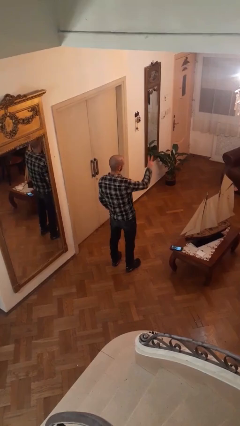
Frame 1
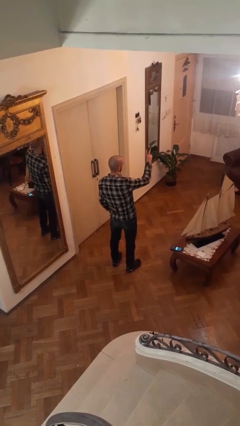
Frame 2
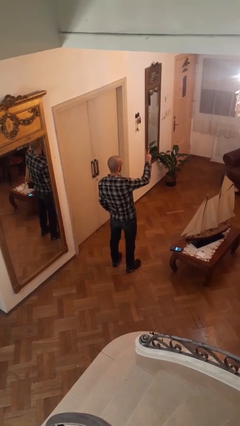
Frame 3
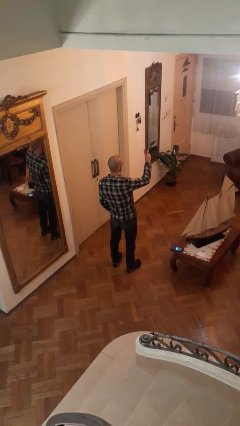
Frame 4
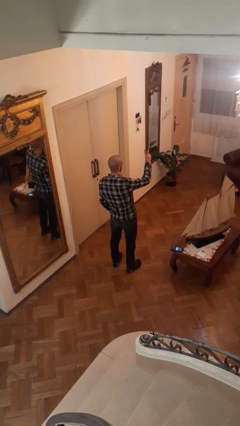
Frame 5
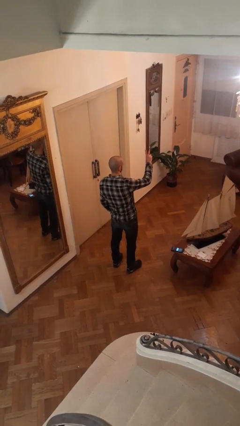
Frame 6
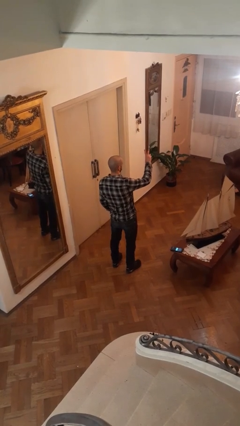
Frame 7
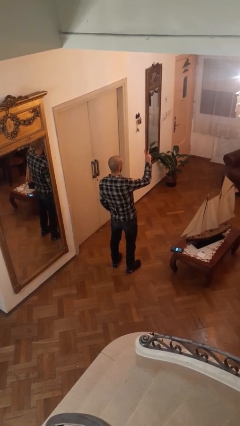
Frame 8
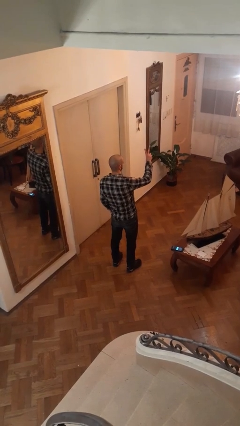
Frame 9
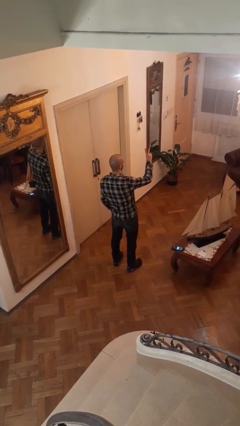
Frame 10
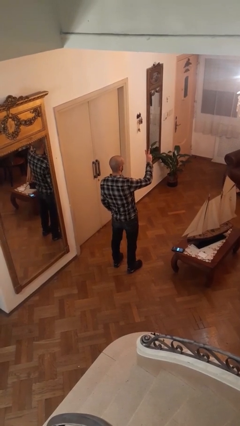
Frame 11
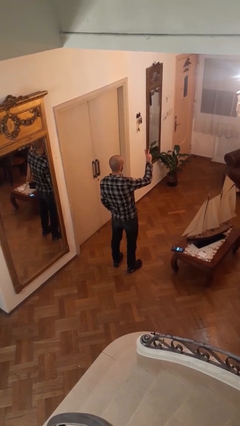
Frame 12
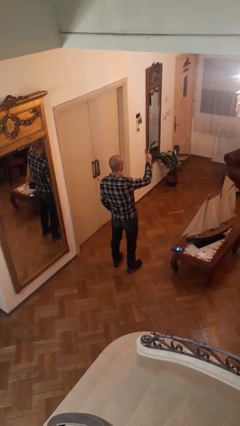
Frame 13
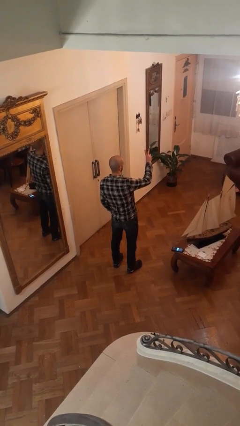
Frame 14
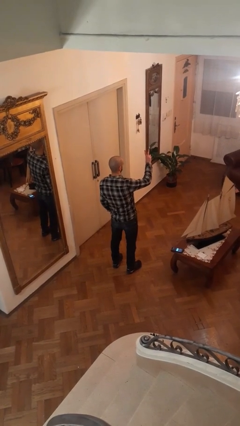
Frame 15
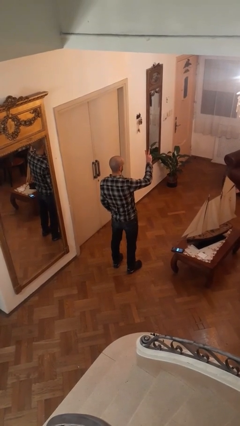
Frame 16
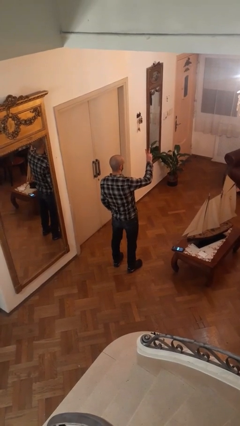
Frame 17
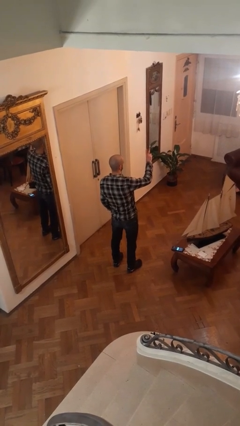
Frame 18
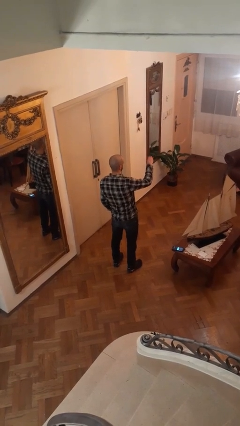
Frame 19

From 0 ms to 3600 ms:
person gestures peace

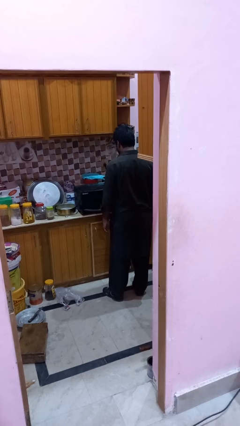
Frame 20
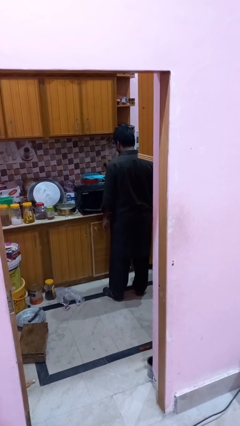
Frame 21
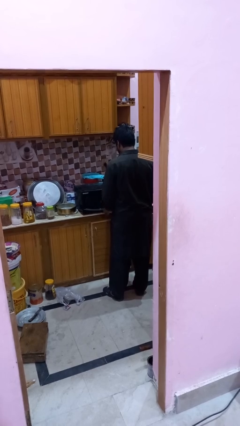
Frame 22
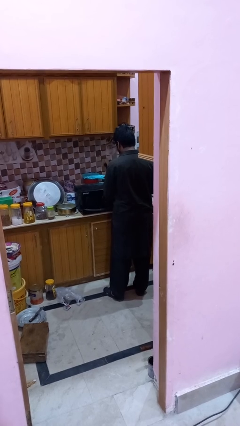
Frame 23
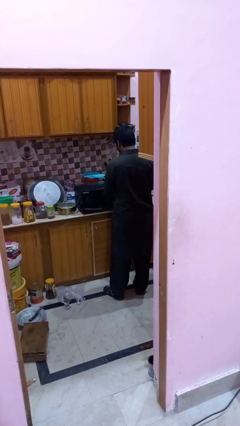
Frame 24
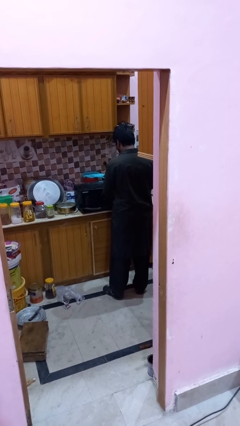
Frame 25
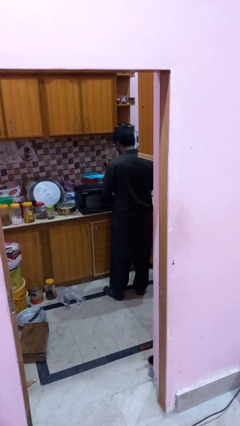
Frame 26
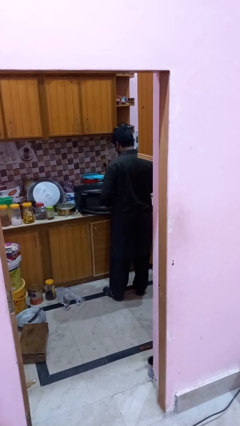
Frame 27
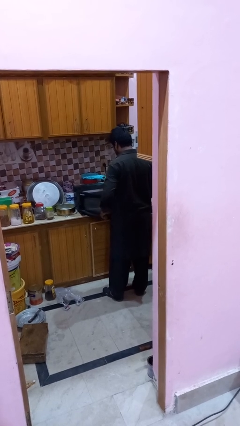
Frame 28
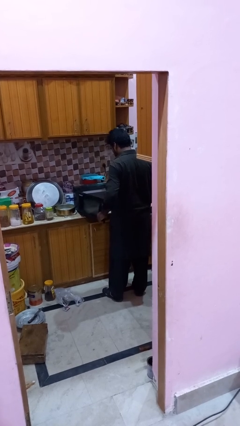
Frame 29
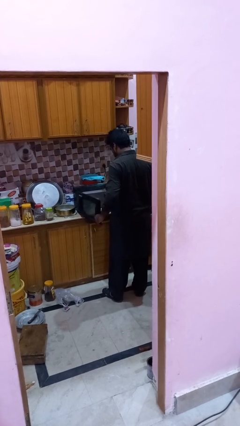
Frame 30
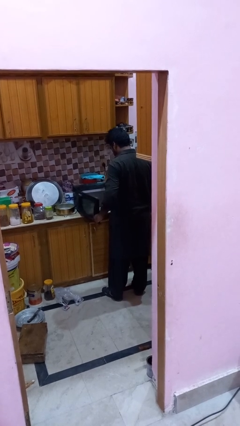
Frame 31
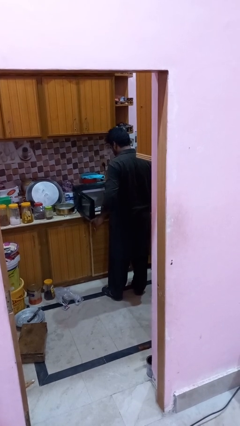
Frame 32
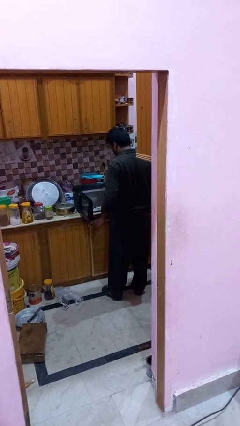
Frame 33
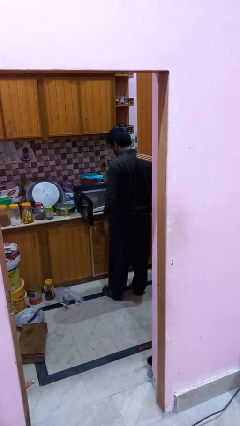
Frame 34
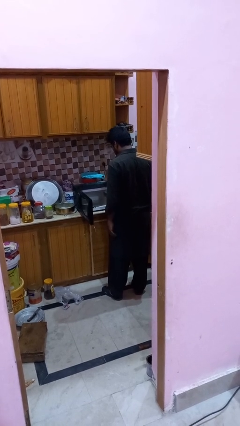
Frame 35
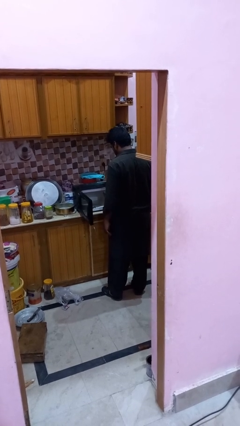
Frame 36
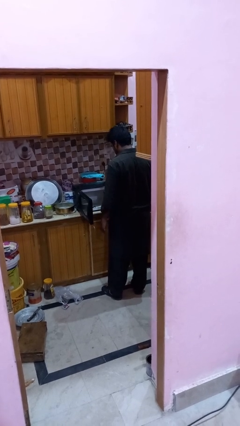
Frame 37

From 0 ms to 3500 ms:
person opens oven door

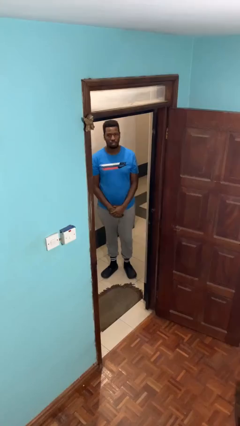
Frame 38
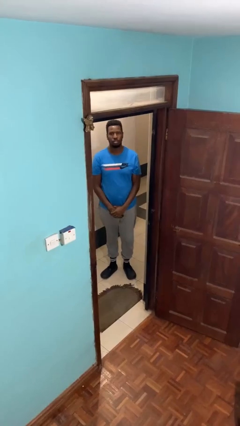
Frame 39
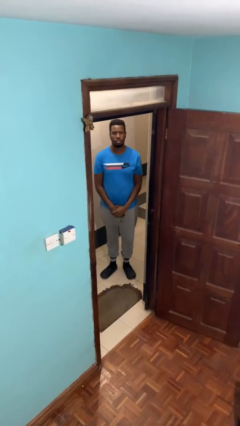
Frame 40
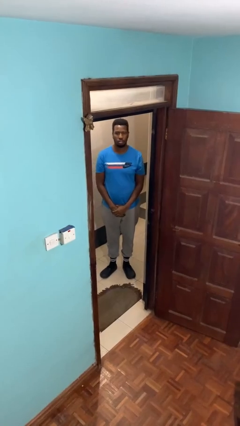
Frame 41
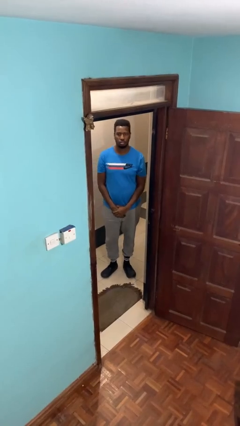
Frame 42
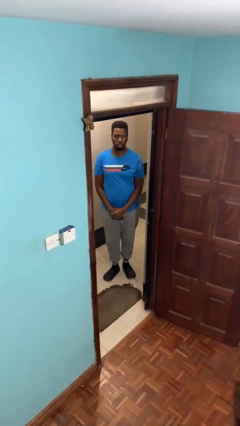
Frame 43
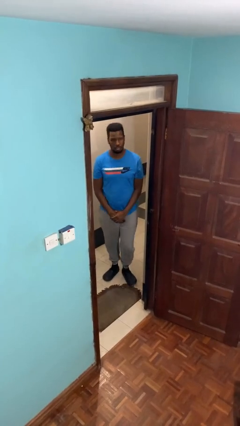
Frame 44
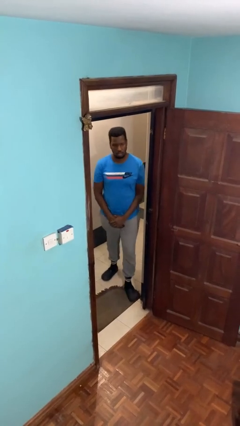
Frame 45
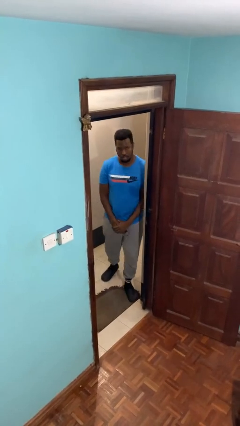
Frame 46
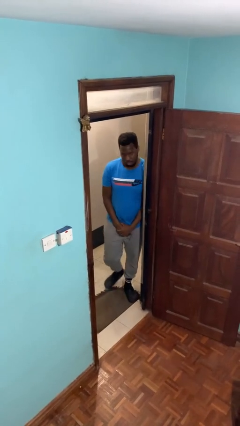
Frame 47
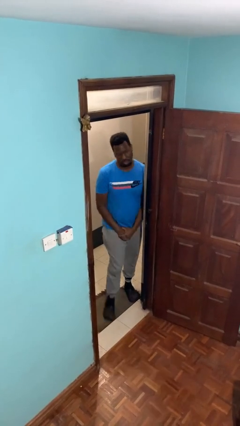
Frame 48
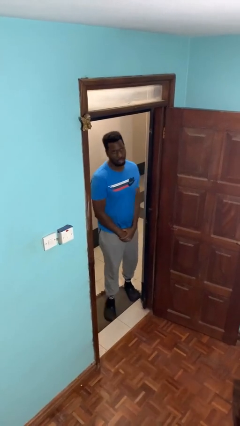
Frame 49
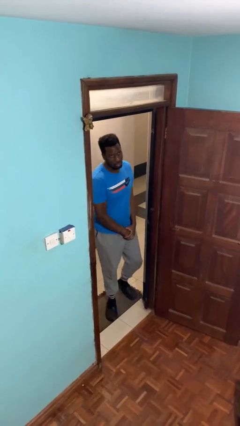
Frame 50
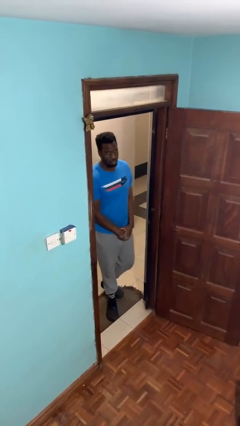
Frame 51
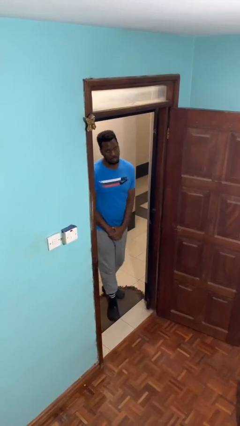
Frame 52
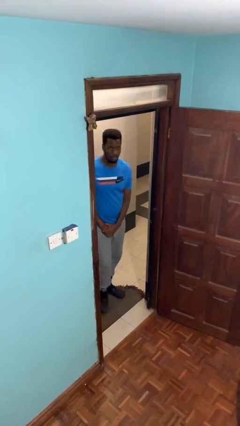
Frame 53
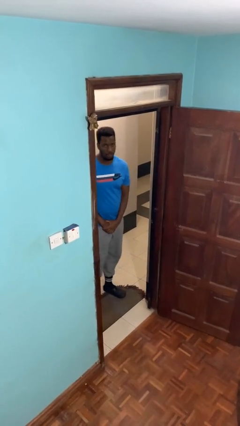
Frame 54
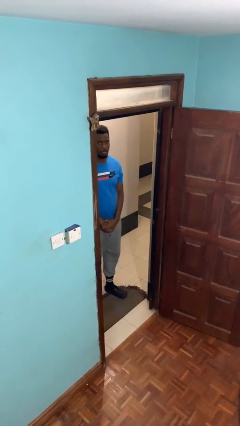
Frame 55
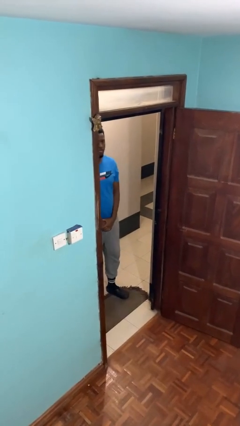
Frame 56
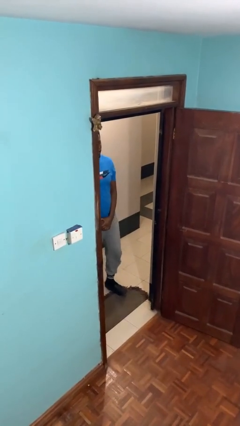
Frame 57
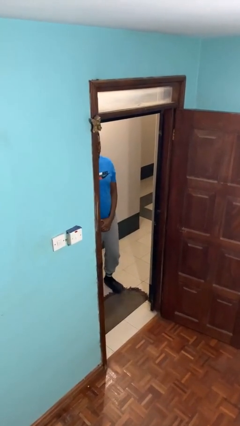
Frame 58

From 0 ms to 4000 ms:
person bumps into wall

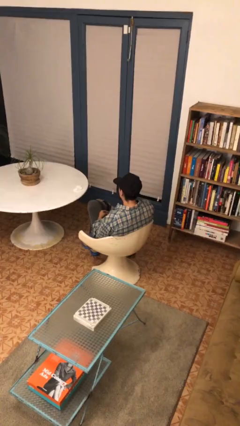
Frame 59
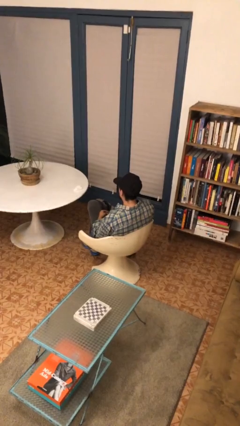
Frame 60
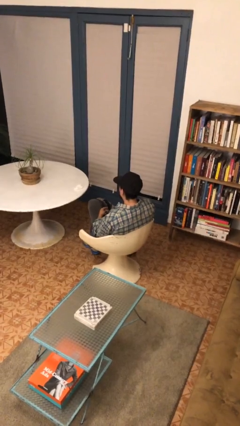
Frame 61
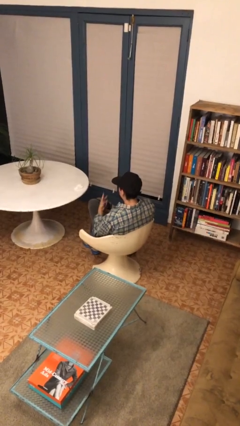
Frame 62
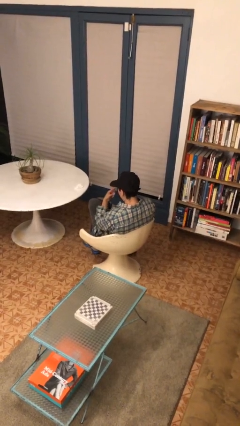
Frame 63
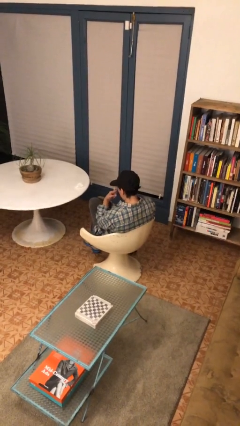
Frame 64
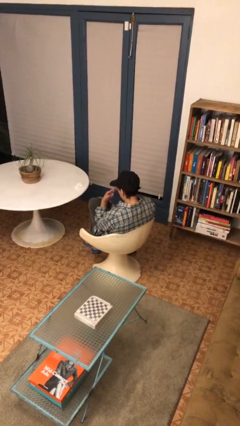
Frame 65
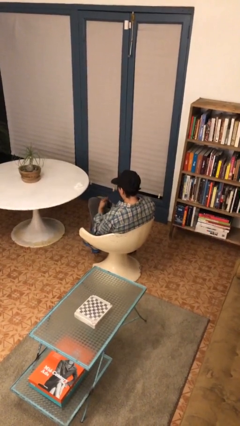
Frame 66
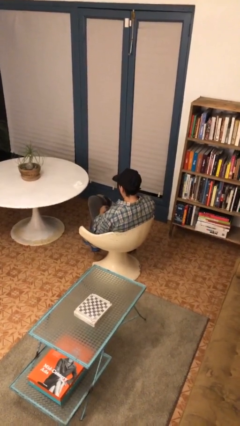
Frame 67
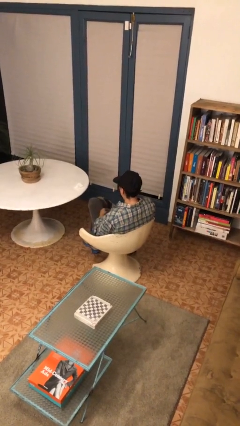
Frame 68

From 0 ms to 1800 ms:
person gestures watch closely

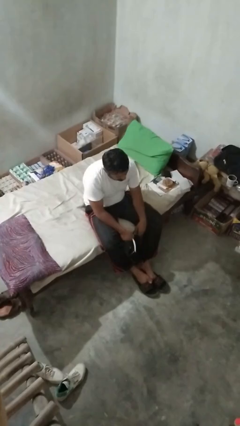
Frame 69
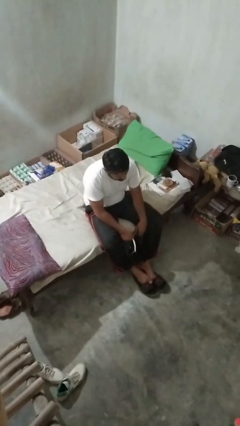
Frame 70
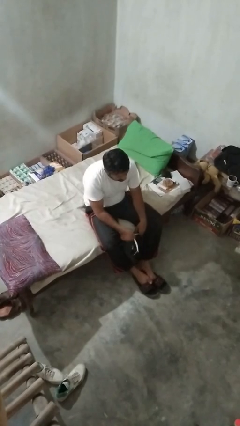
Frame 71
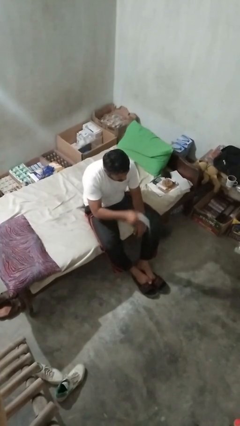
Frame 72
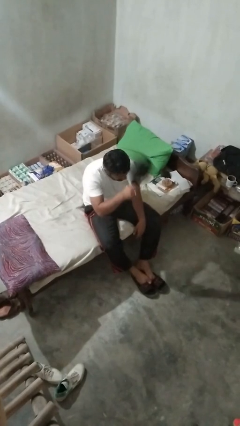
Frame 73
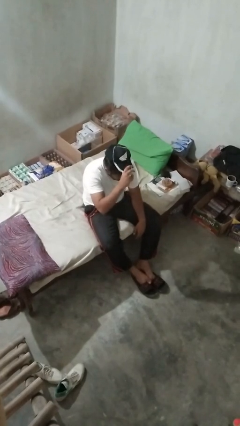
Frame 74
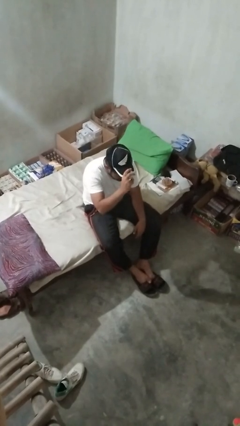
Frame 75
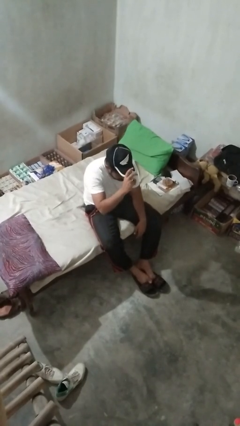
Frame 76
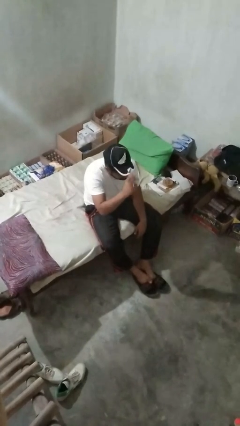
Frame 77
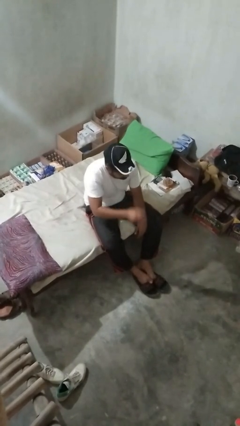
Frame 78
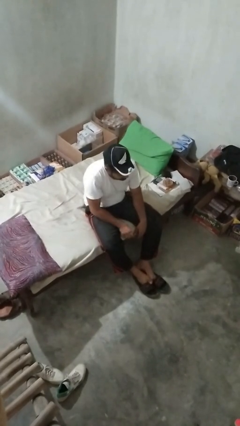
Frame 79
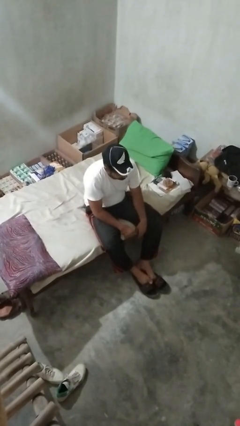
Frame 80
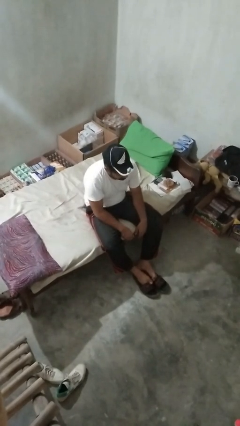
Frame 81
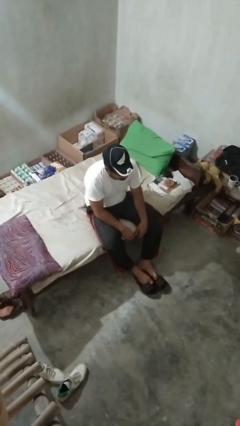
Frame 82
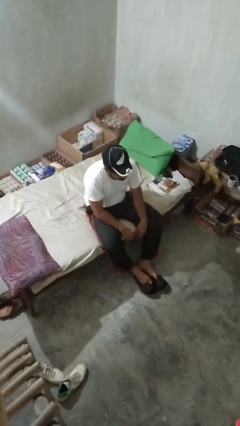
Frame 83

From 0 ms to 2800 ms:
person puts on hat

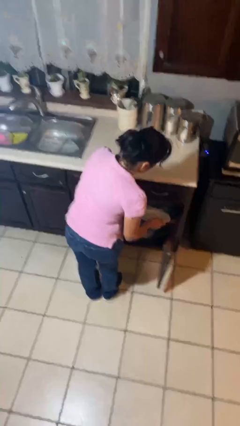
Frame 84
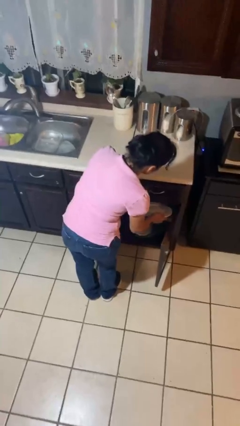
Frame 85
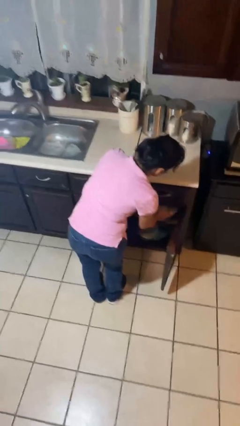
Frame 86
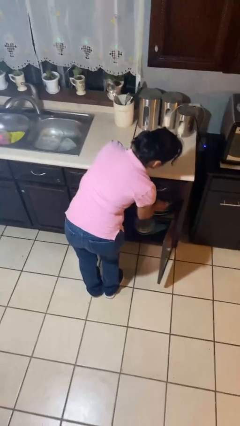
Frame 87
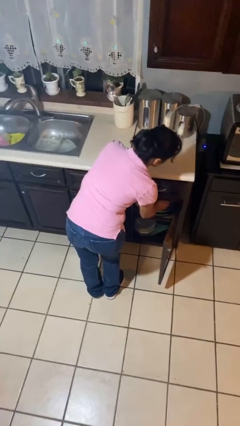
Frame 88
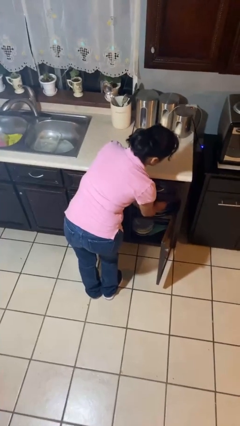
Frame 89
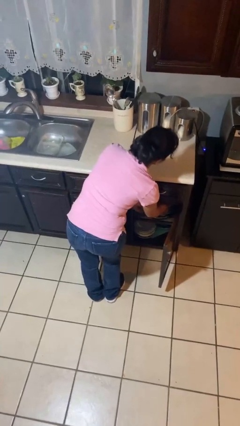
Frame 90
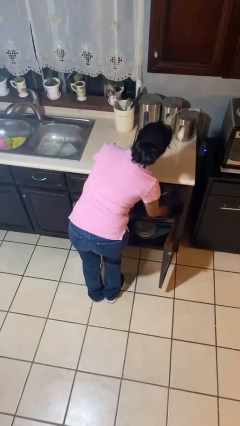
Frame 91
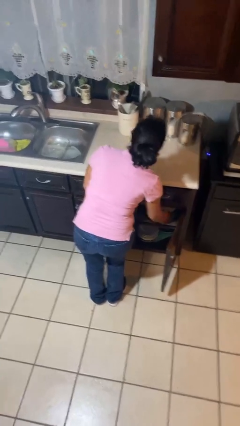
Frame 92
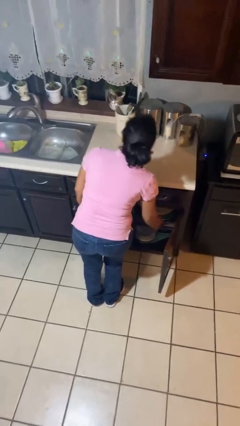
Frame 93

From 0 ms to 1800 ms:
person takes object from cabinet

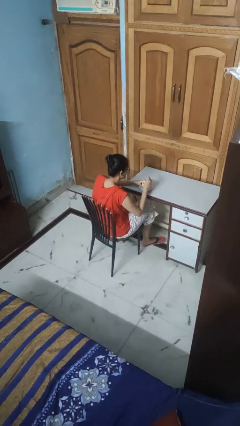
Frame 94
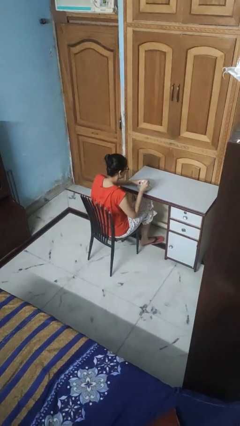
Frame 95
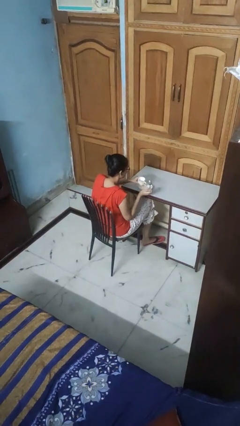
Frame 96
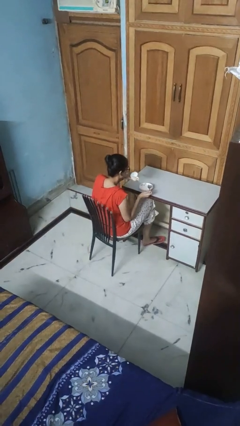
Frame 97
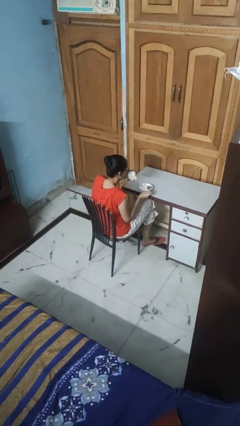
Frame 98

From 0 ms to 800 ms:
person stirs mug
